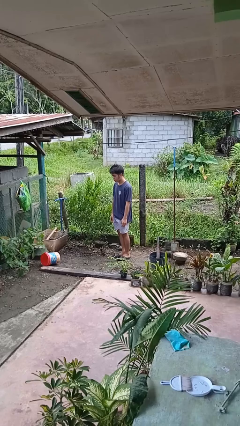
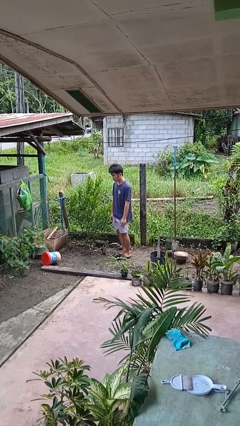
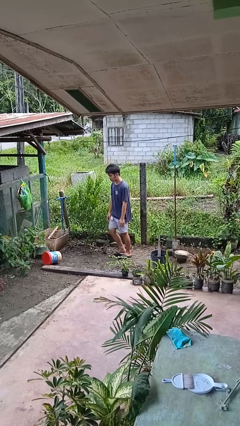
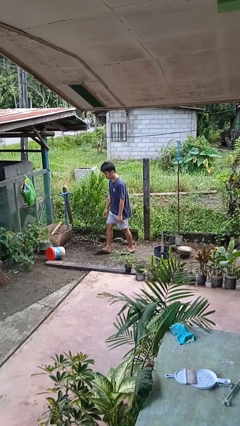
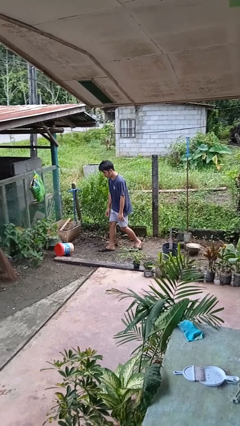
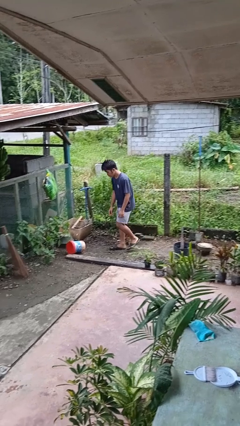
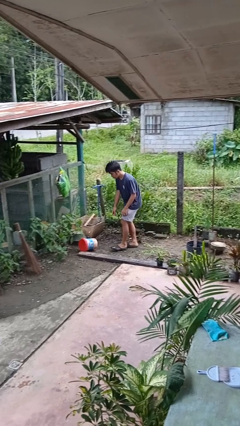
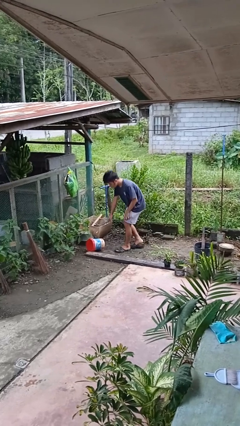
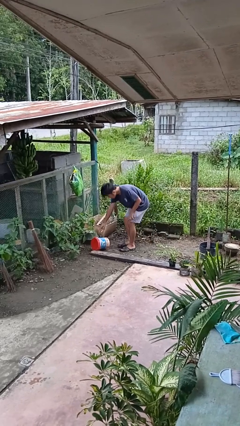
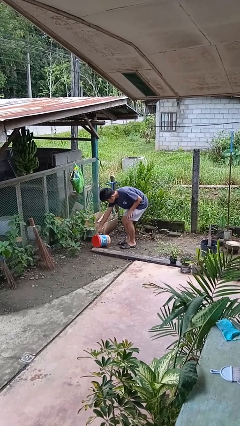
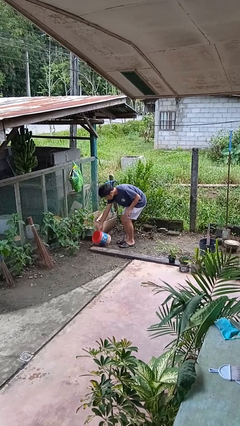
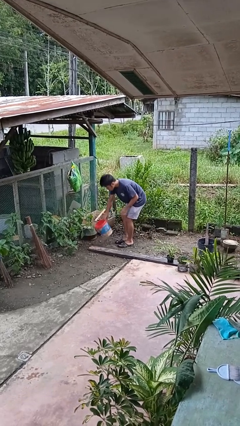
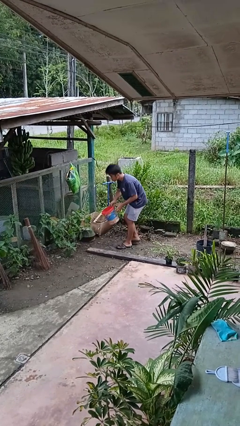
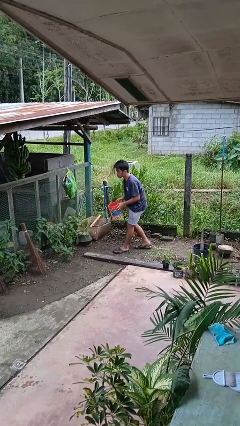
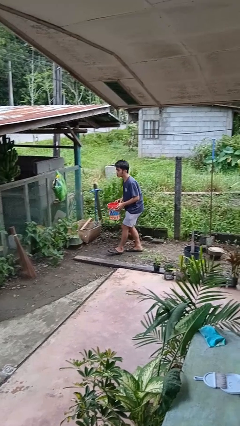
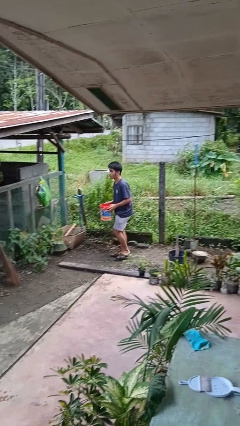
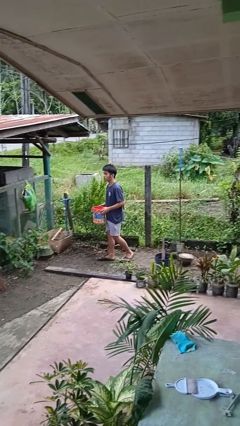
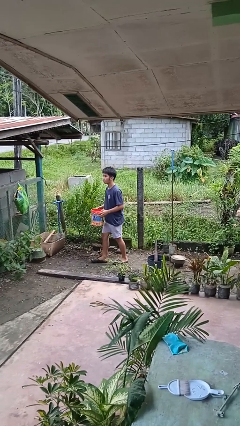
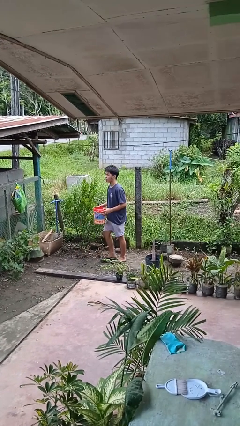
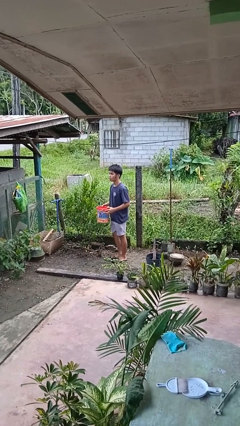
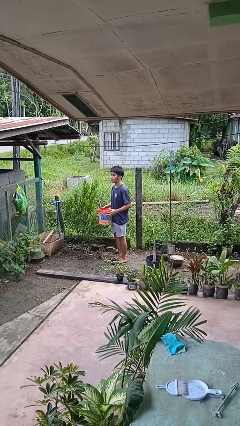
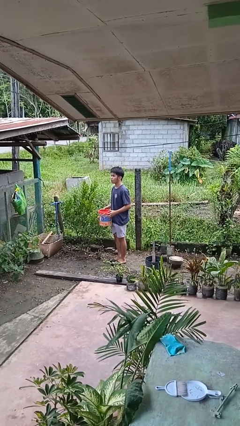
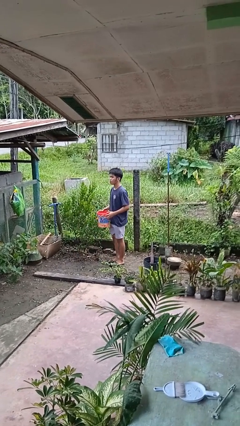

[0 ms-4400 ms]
person picks up object from floor

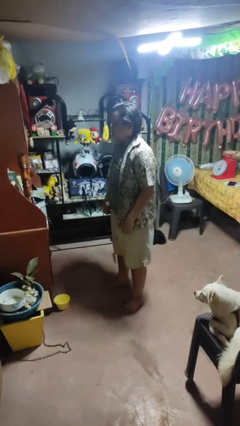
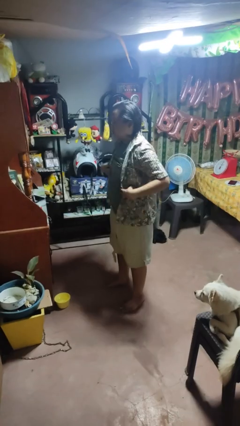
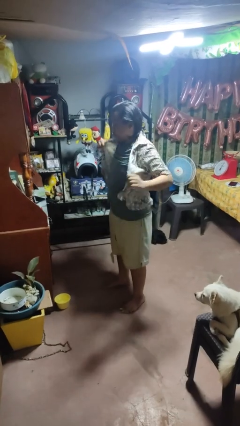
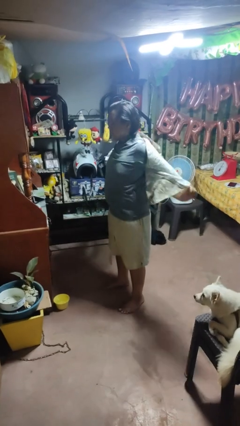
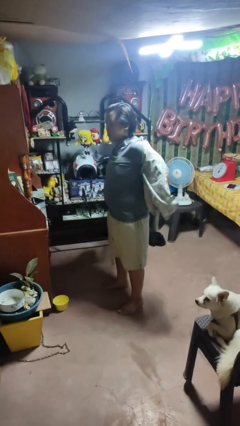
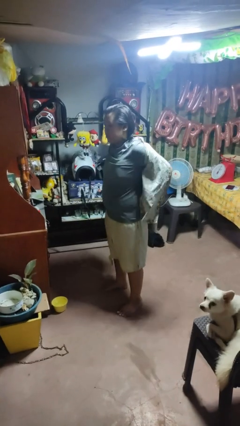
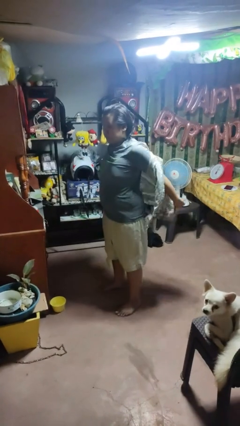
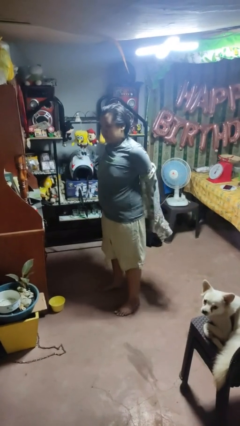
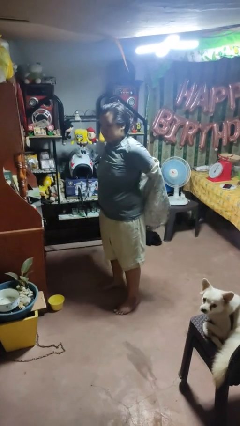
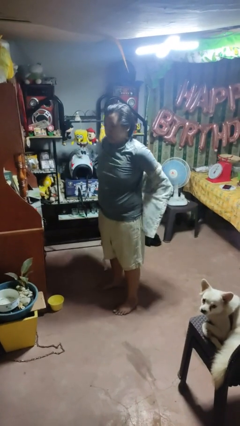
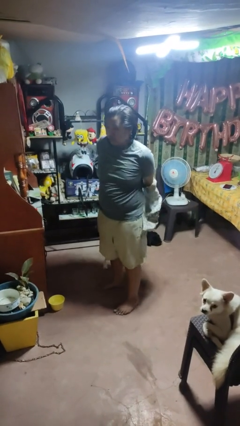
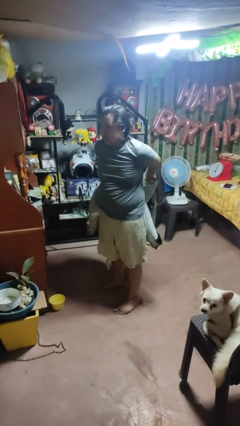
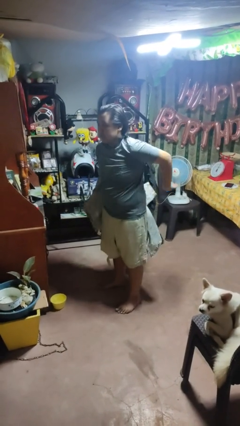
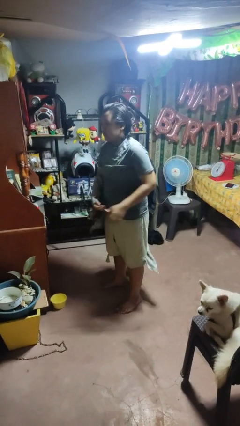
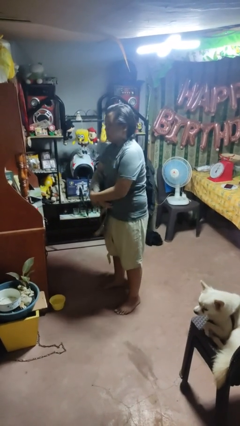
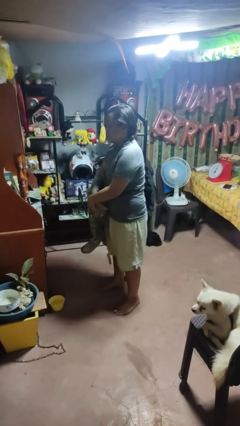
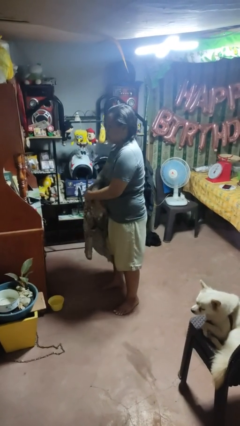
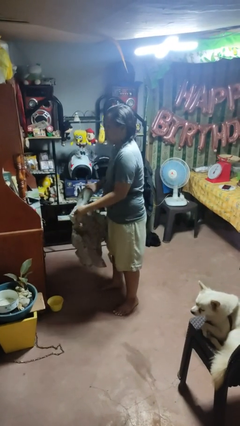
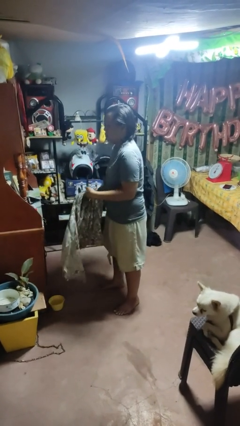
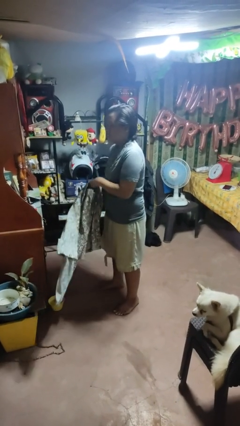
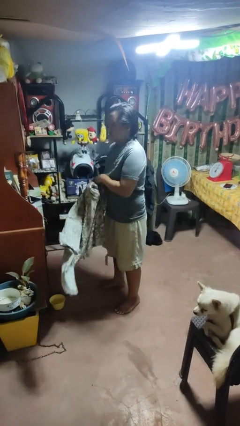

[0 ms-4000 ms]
person takes off shirt

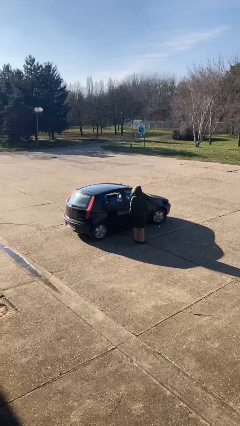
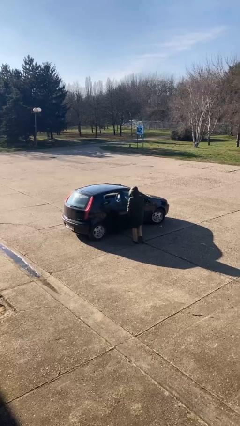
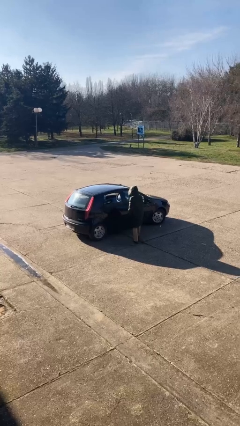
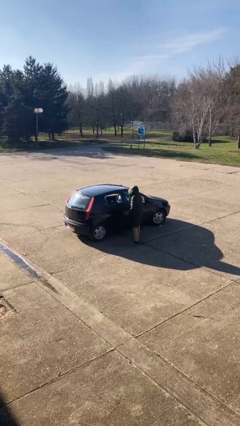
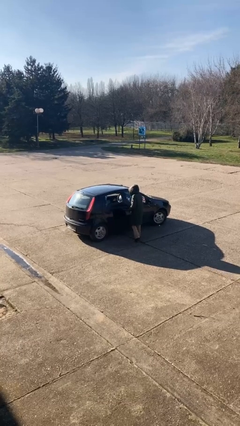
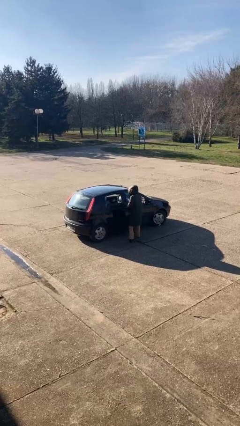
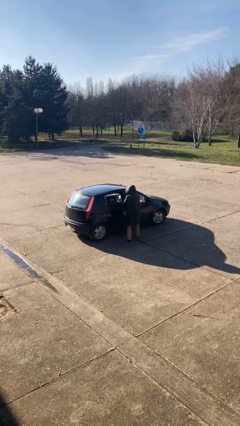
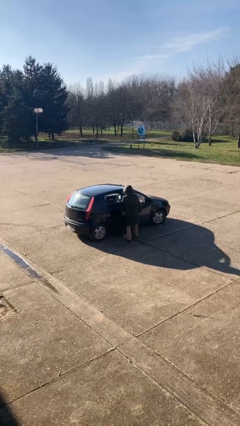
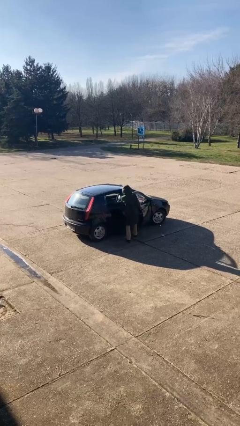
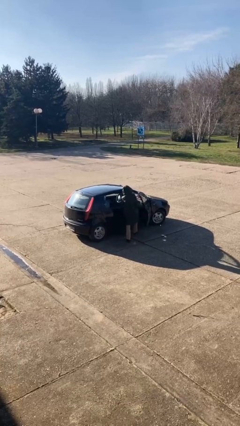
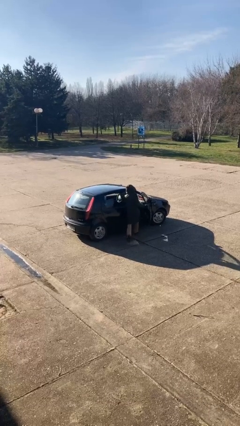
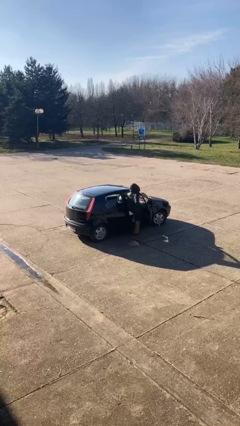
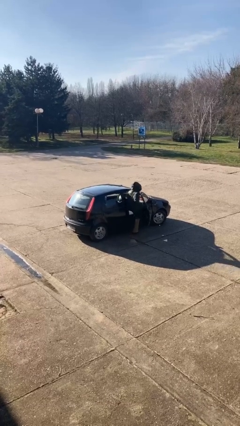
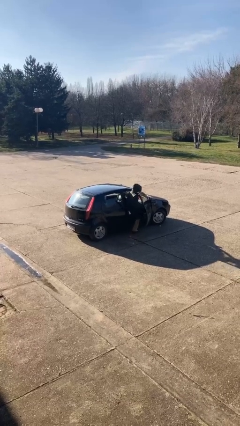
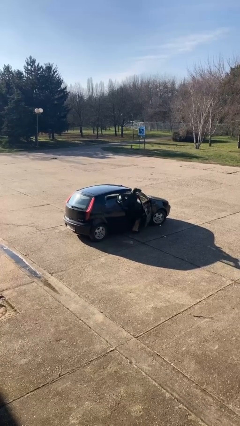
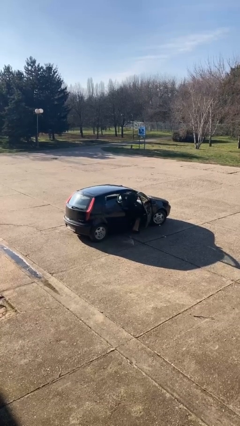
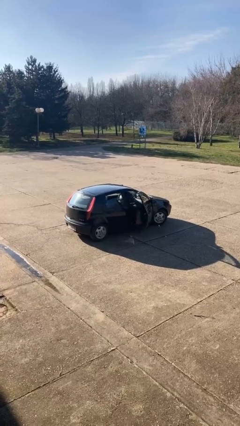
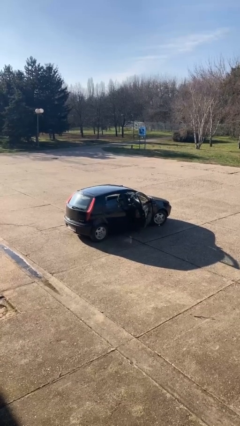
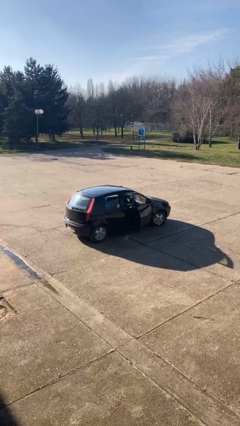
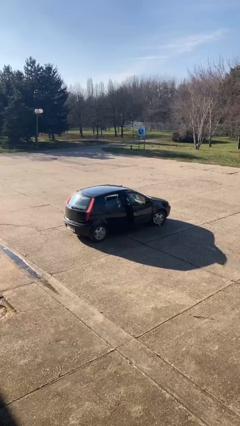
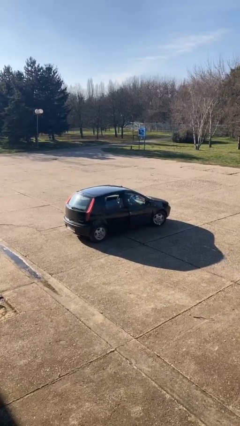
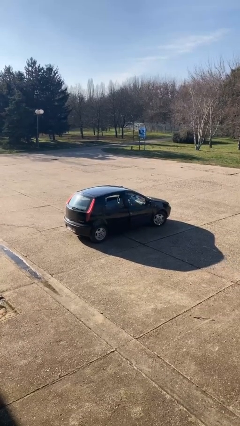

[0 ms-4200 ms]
car picks up person

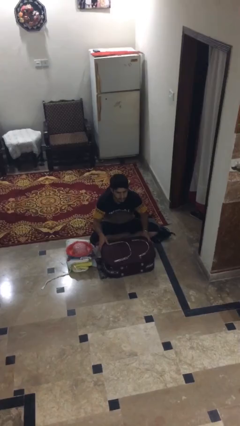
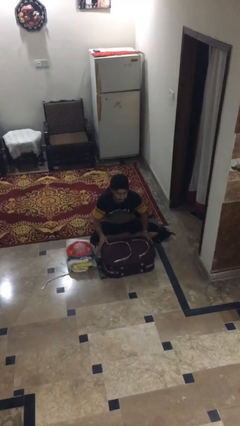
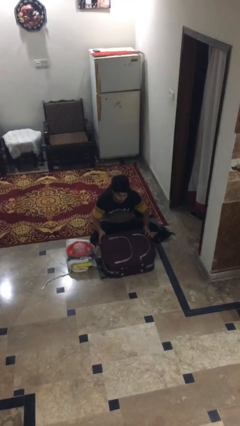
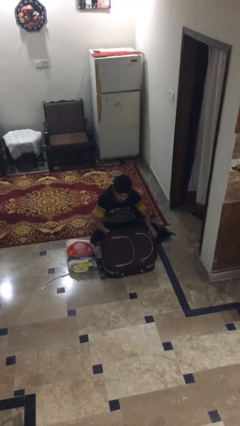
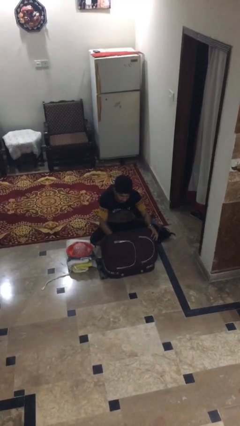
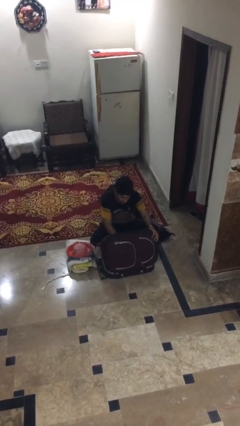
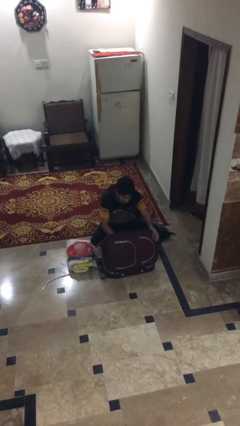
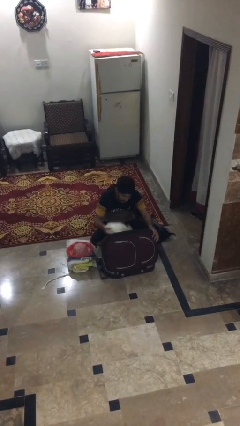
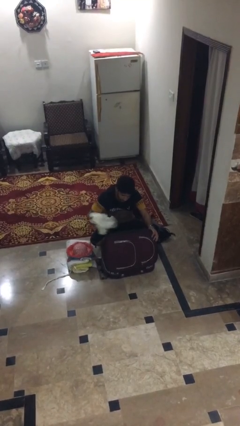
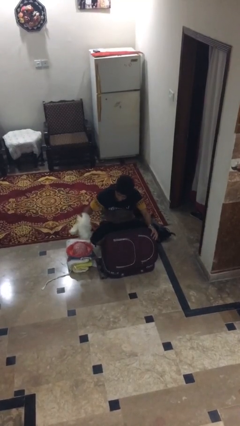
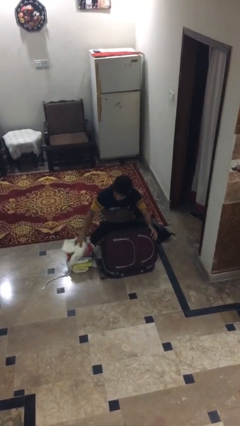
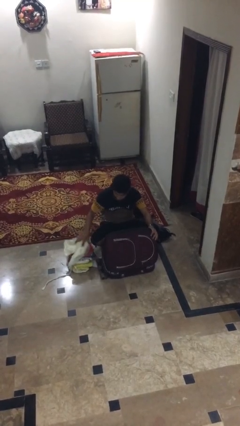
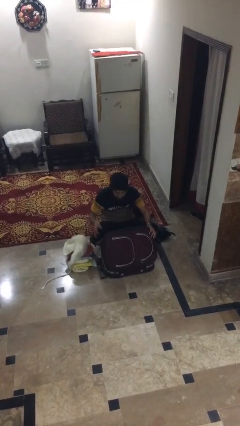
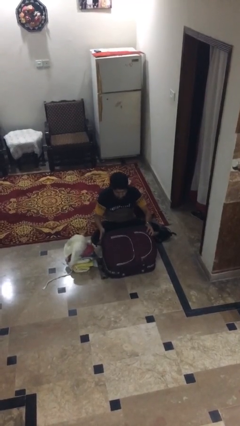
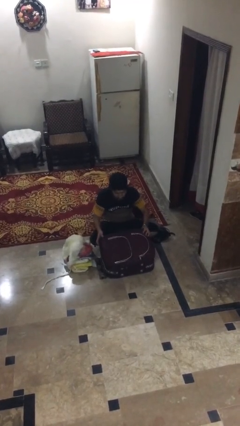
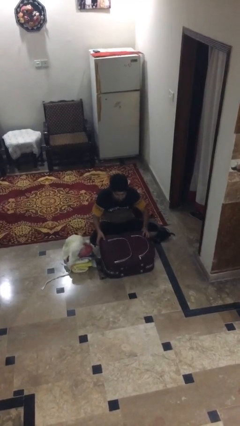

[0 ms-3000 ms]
person unloads clothes from suitcase

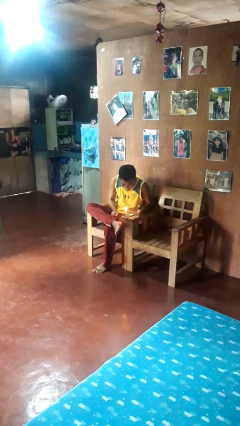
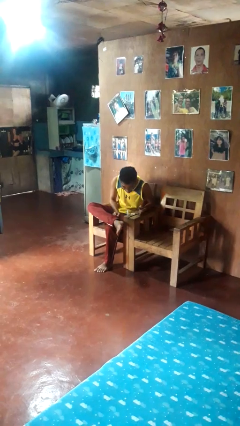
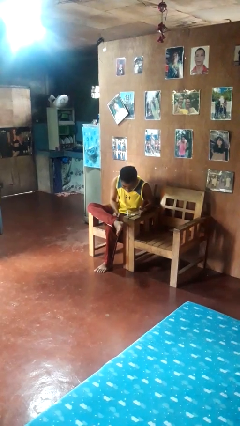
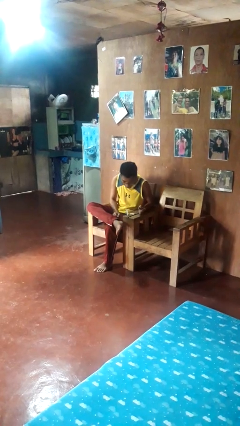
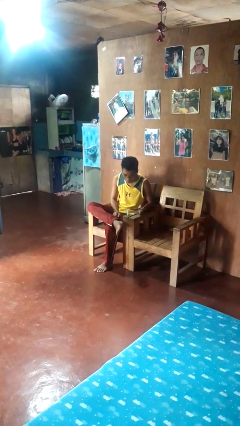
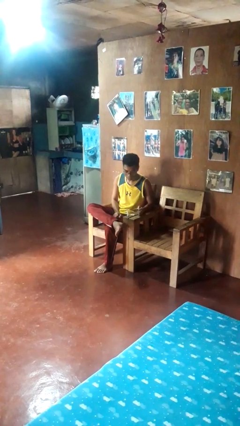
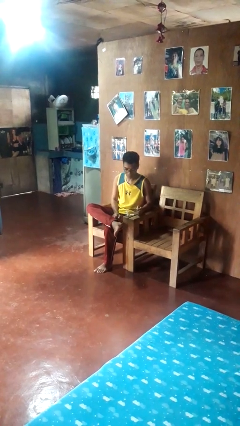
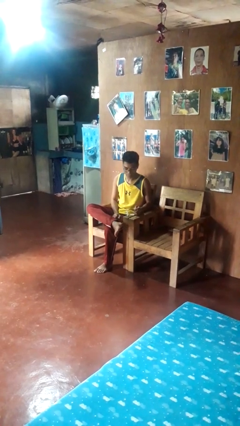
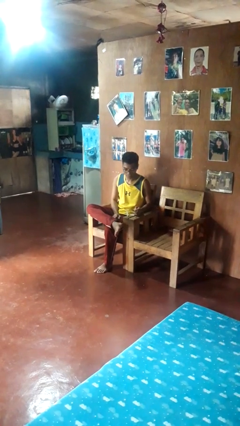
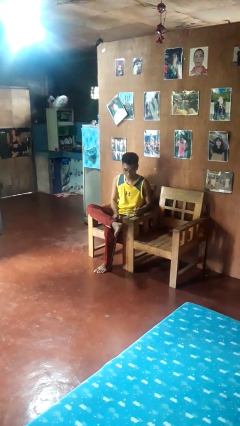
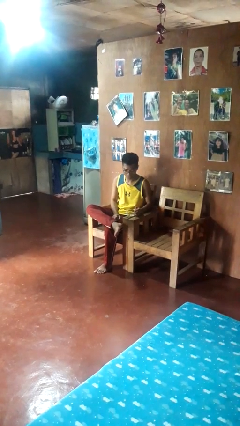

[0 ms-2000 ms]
person extinguishes candle
